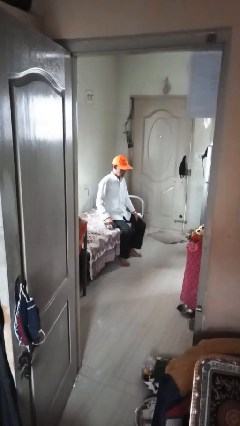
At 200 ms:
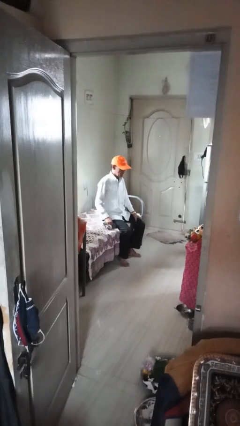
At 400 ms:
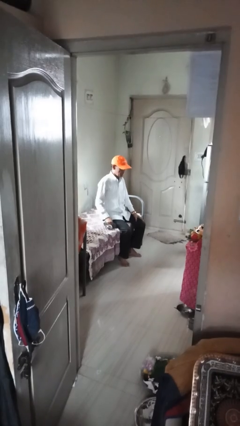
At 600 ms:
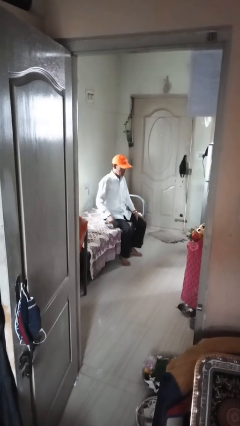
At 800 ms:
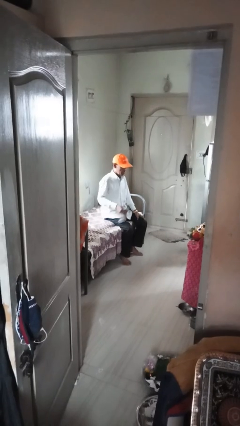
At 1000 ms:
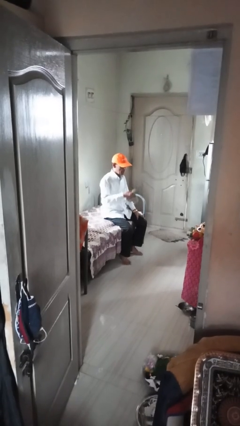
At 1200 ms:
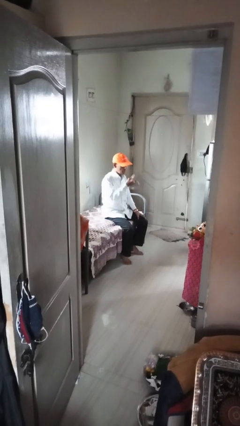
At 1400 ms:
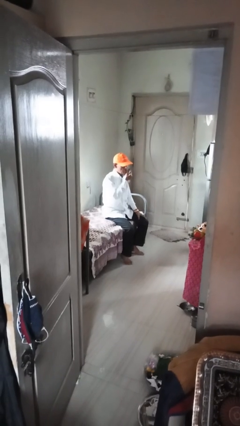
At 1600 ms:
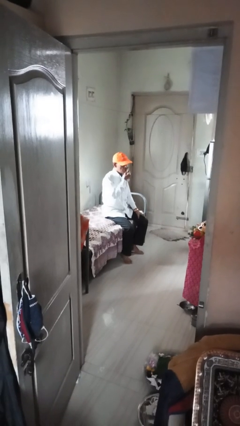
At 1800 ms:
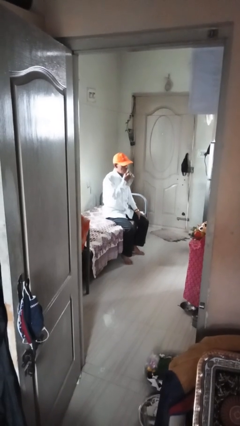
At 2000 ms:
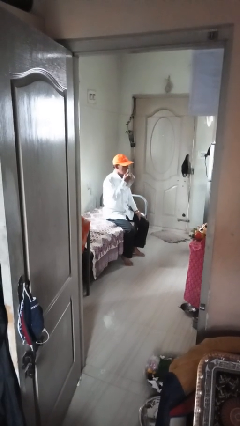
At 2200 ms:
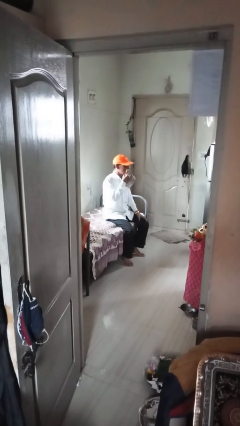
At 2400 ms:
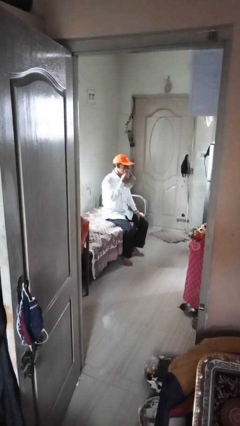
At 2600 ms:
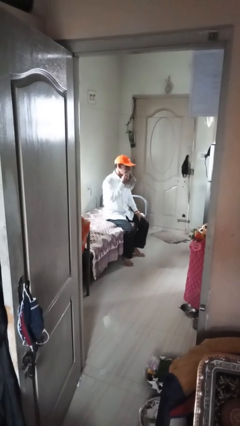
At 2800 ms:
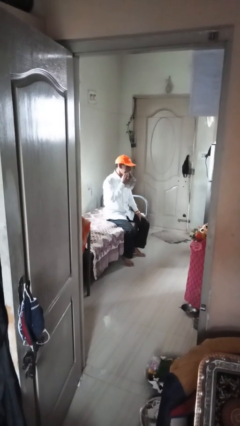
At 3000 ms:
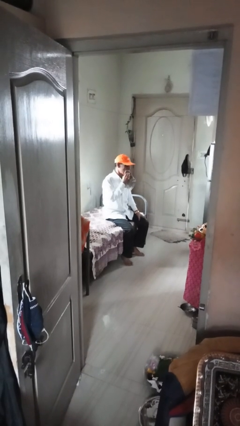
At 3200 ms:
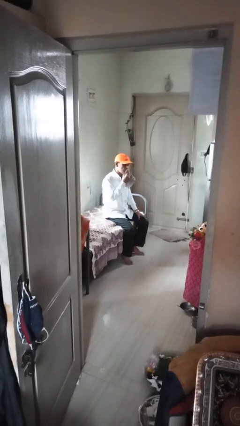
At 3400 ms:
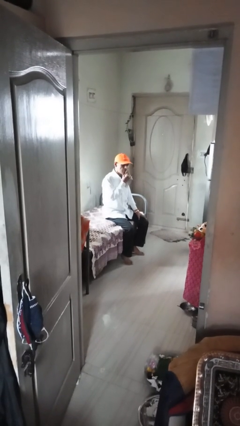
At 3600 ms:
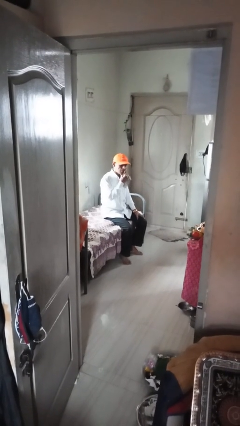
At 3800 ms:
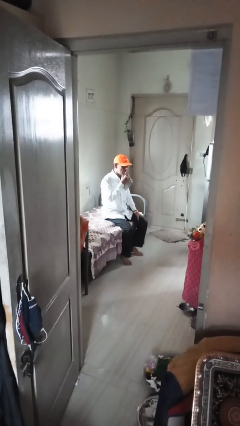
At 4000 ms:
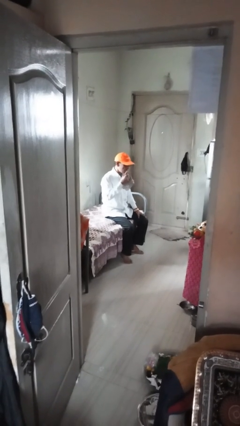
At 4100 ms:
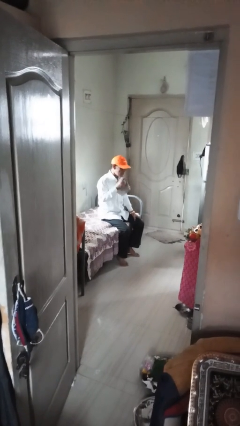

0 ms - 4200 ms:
person wipes mouth with napkin

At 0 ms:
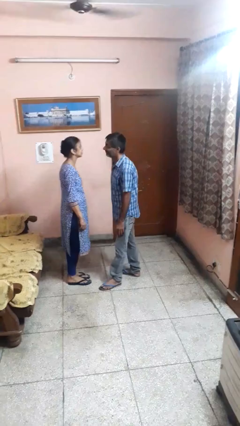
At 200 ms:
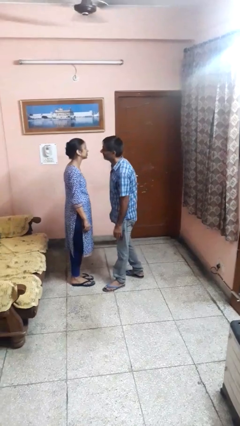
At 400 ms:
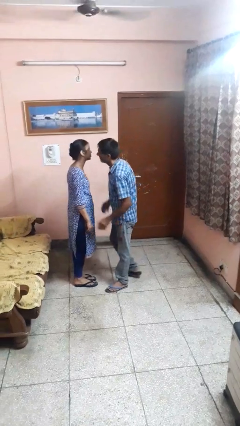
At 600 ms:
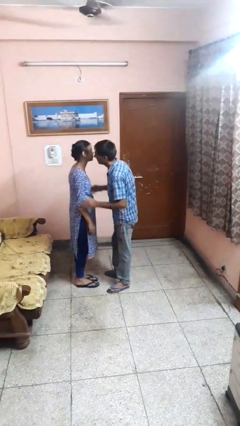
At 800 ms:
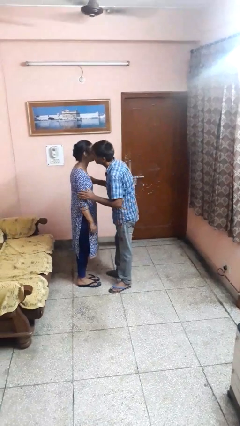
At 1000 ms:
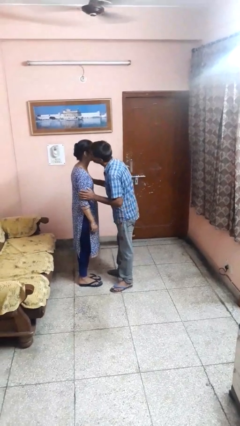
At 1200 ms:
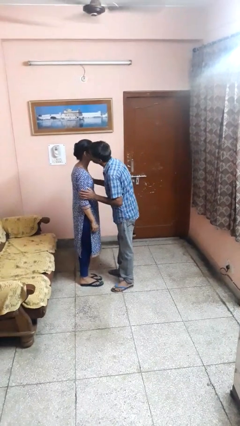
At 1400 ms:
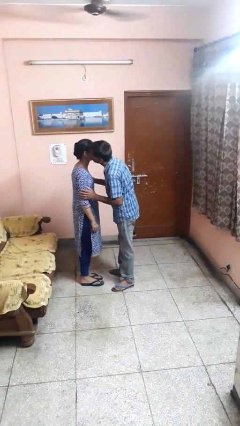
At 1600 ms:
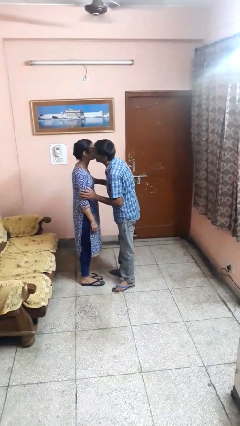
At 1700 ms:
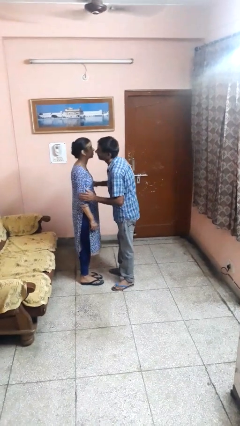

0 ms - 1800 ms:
person kisses cheek of person

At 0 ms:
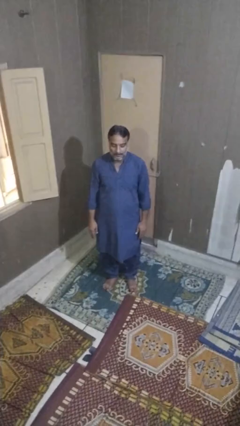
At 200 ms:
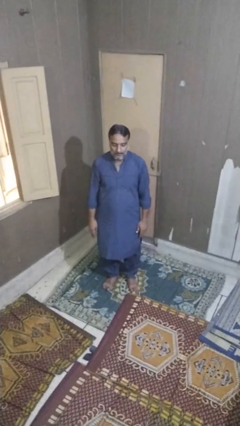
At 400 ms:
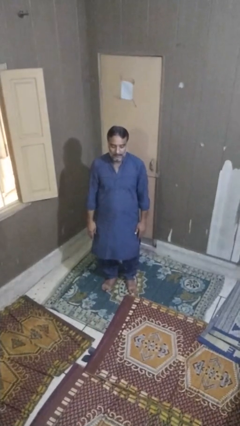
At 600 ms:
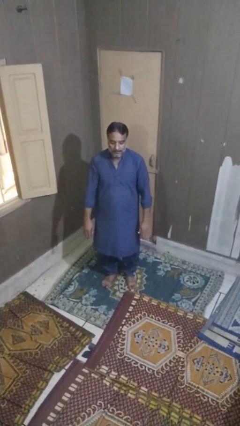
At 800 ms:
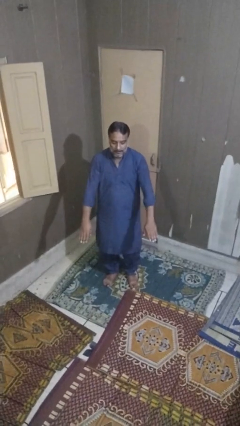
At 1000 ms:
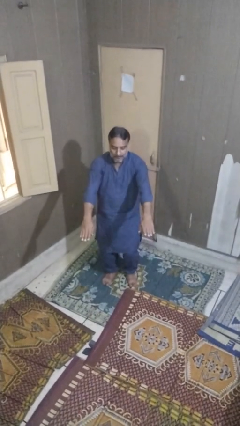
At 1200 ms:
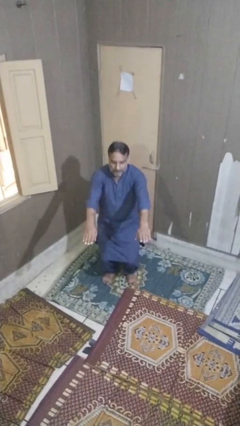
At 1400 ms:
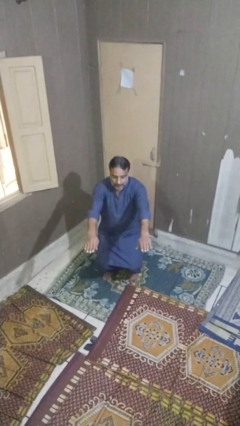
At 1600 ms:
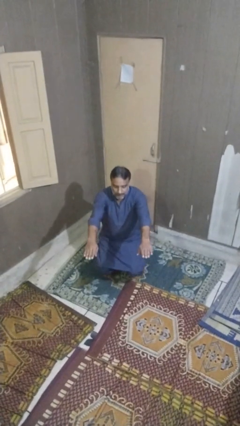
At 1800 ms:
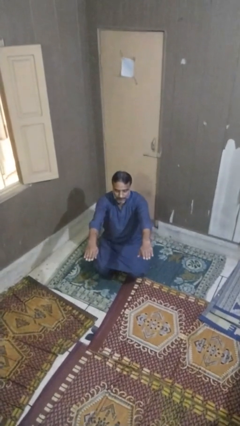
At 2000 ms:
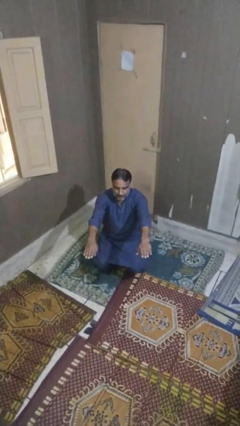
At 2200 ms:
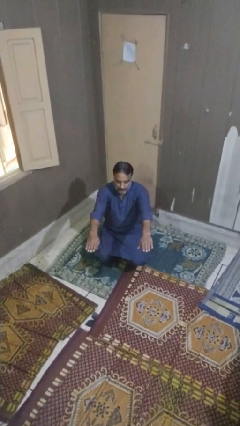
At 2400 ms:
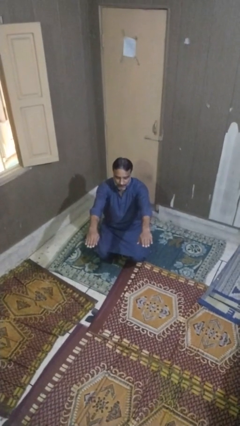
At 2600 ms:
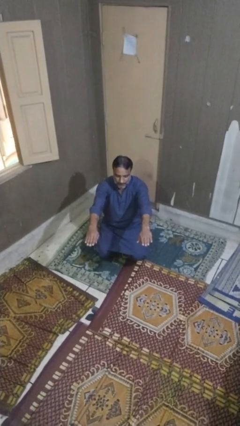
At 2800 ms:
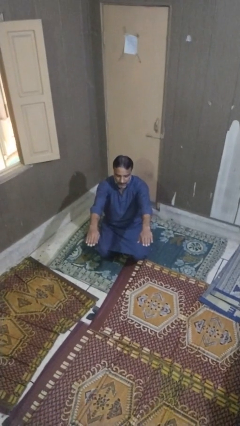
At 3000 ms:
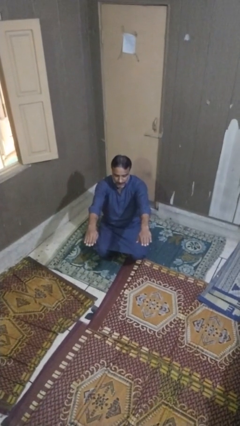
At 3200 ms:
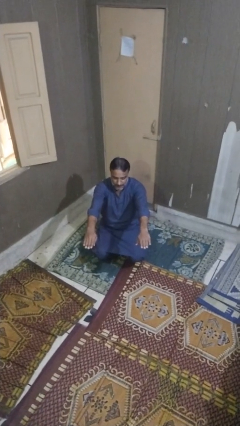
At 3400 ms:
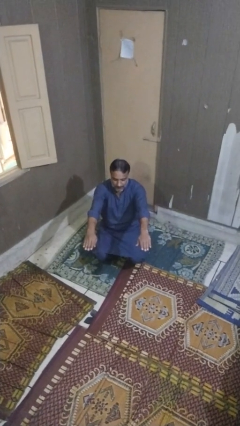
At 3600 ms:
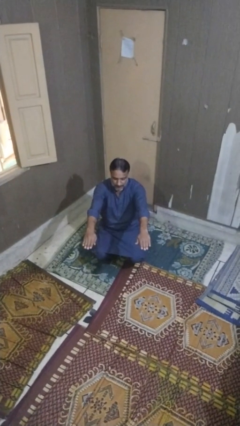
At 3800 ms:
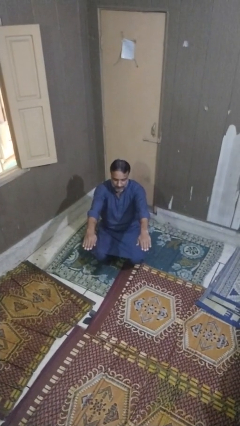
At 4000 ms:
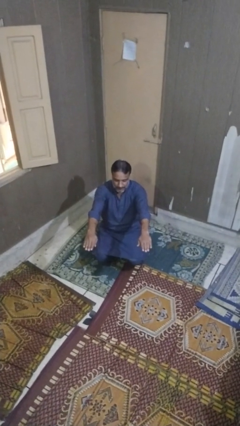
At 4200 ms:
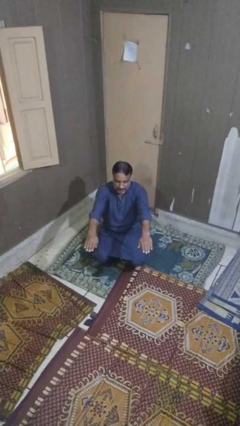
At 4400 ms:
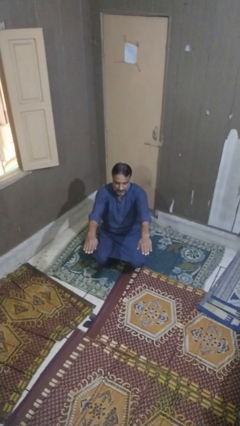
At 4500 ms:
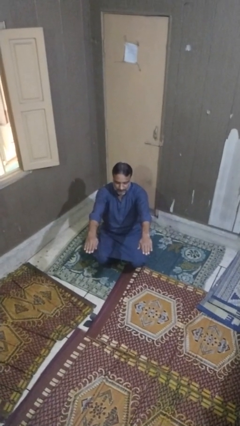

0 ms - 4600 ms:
person squats

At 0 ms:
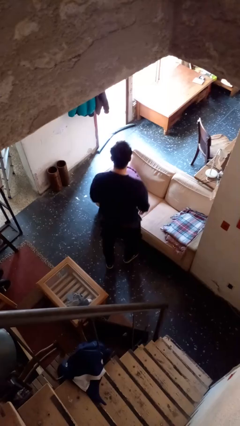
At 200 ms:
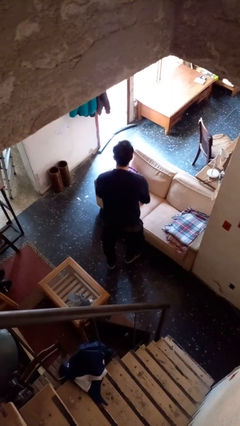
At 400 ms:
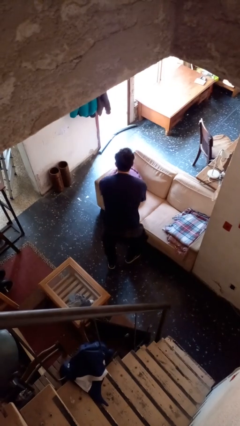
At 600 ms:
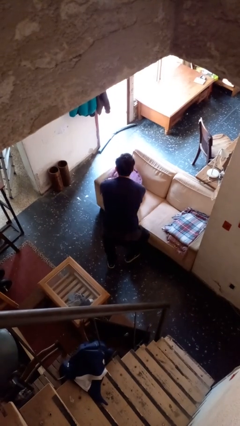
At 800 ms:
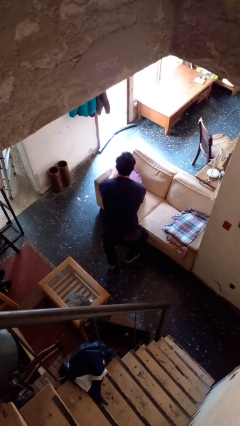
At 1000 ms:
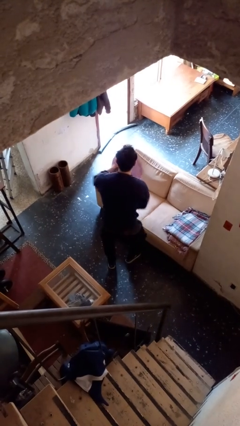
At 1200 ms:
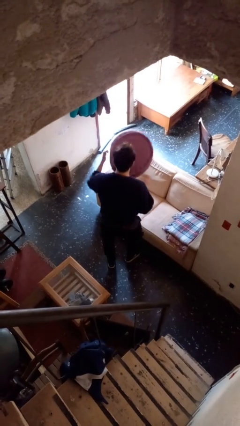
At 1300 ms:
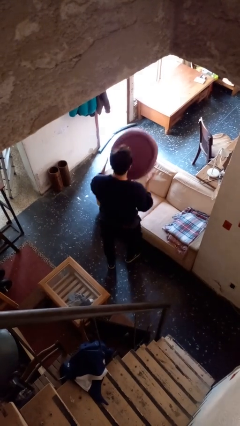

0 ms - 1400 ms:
person picks up object from couch

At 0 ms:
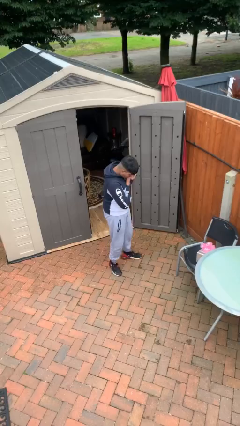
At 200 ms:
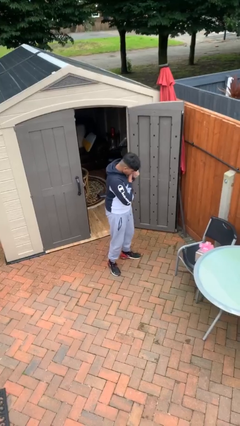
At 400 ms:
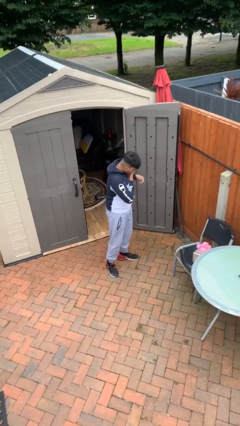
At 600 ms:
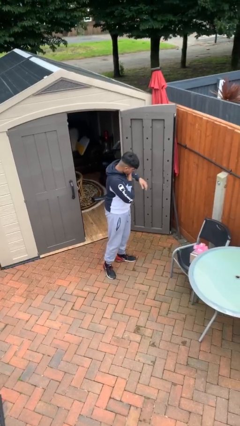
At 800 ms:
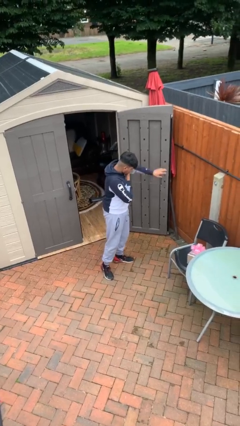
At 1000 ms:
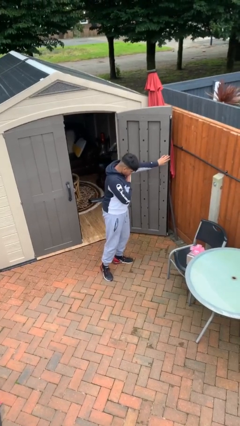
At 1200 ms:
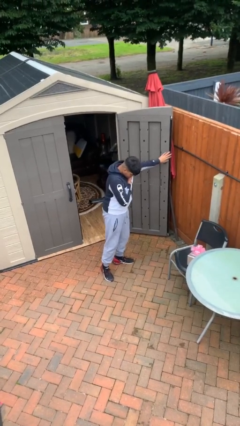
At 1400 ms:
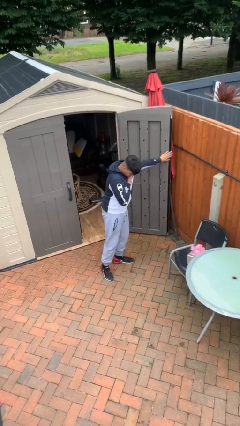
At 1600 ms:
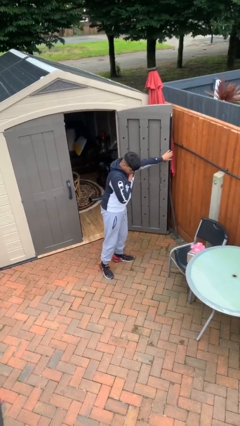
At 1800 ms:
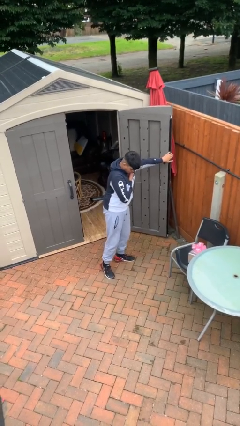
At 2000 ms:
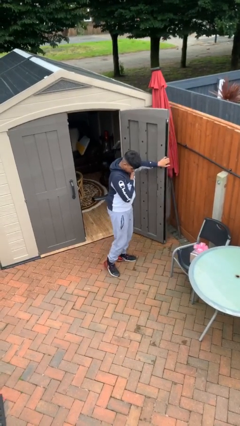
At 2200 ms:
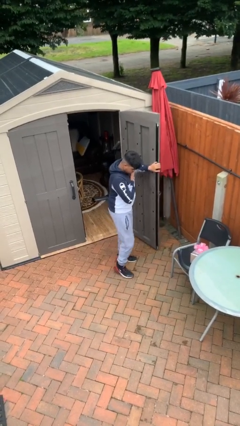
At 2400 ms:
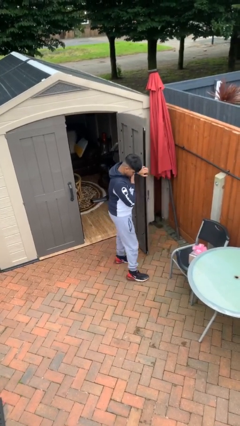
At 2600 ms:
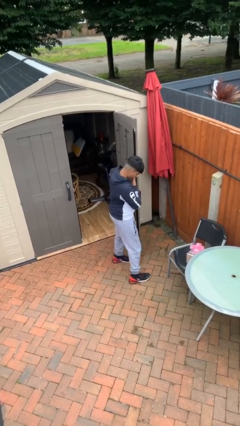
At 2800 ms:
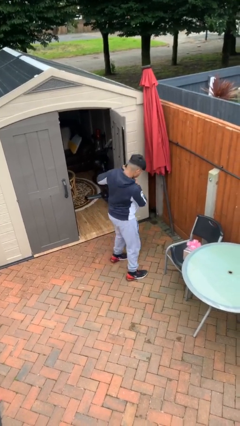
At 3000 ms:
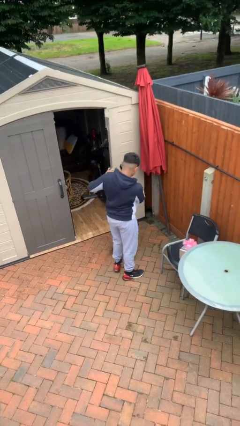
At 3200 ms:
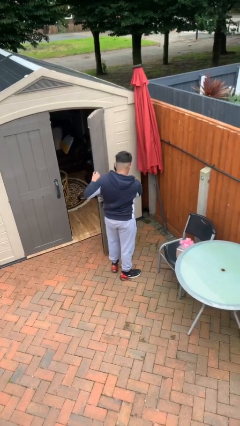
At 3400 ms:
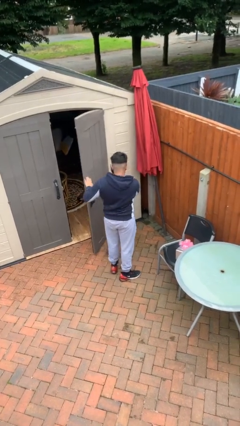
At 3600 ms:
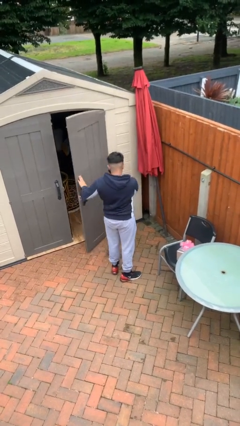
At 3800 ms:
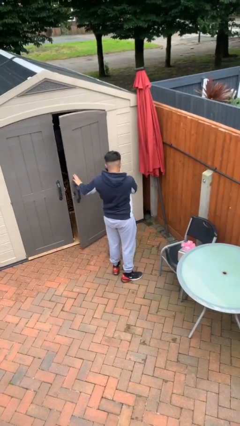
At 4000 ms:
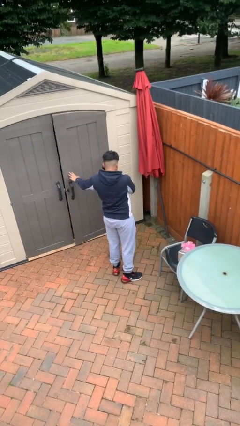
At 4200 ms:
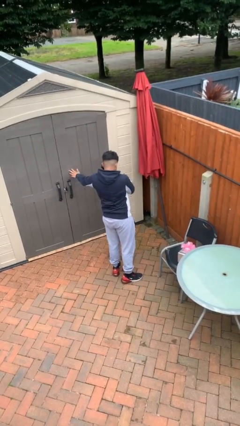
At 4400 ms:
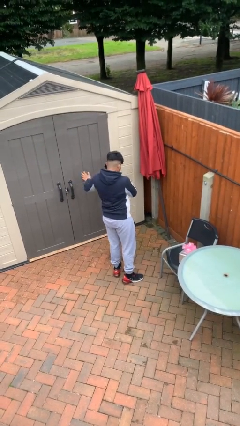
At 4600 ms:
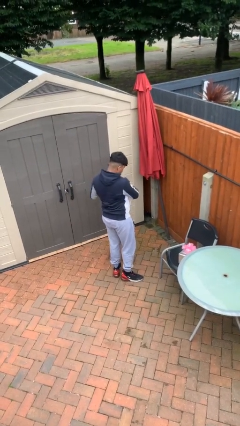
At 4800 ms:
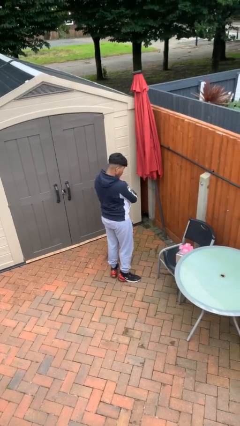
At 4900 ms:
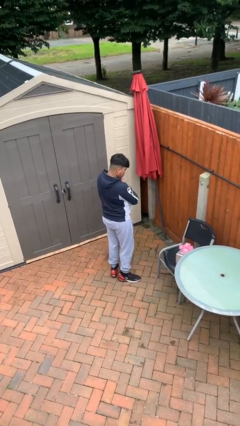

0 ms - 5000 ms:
person closes facility door

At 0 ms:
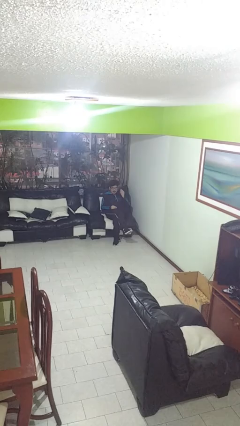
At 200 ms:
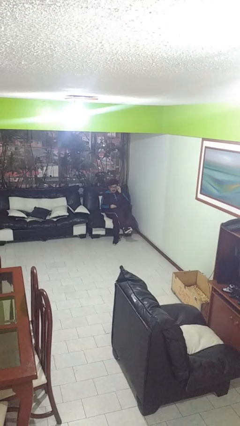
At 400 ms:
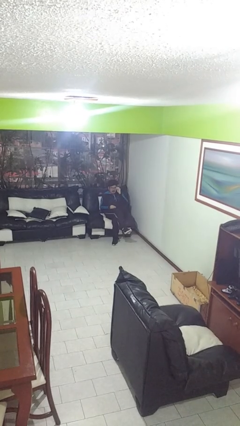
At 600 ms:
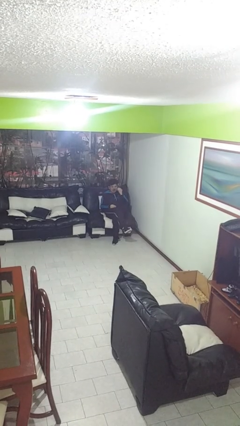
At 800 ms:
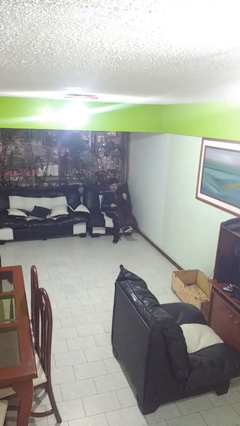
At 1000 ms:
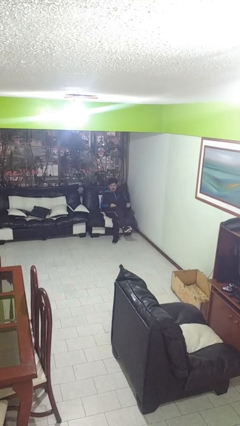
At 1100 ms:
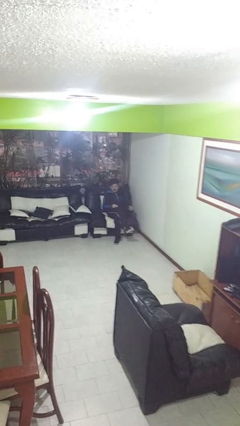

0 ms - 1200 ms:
person takes off glasses
